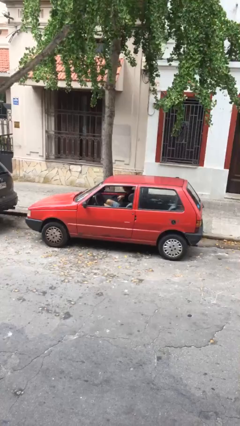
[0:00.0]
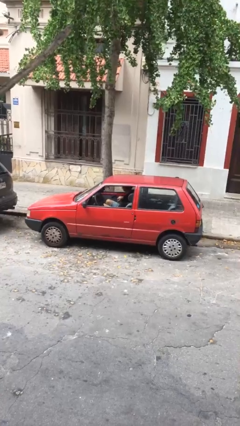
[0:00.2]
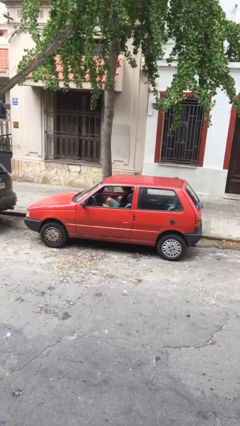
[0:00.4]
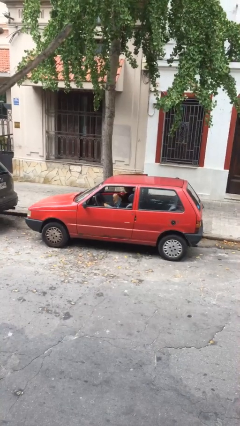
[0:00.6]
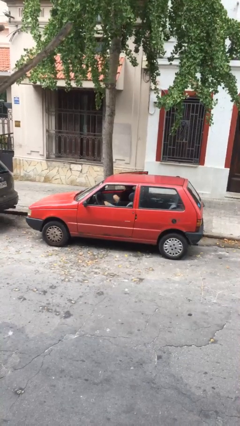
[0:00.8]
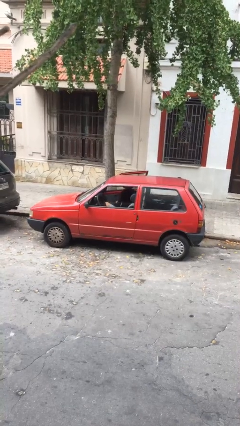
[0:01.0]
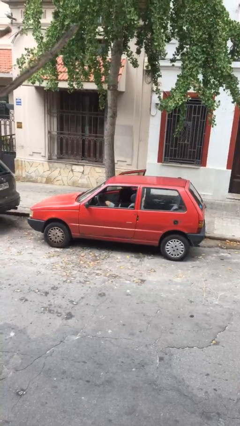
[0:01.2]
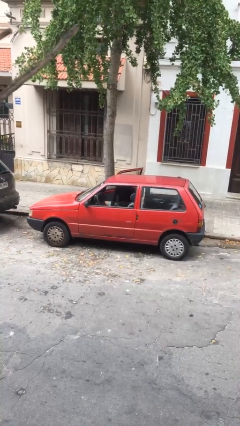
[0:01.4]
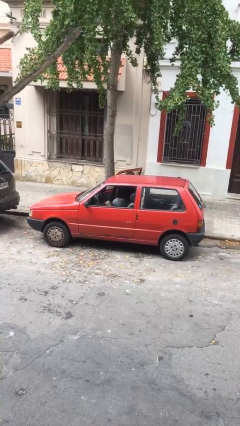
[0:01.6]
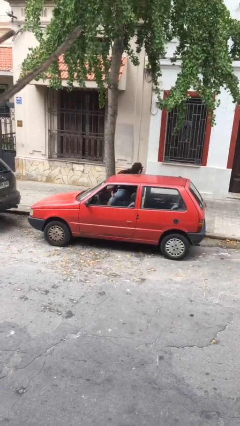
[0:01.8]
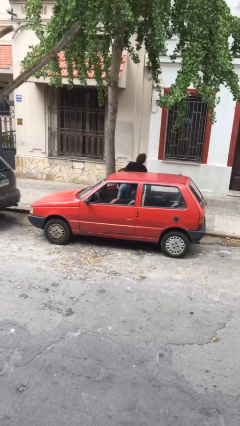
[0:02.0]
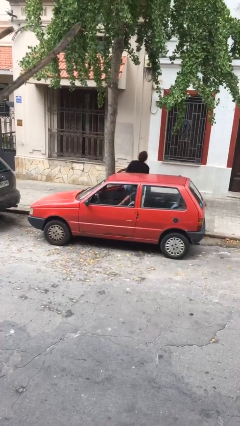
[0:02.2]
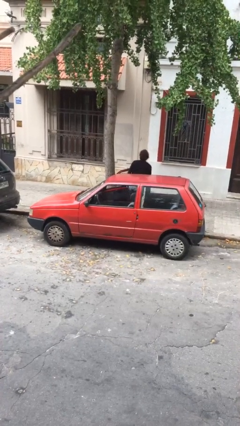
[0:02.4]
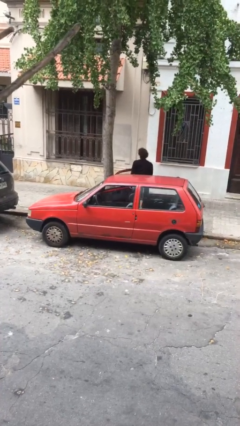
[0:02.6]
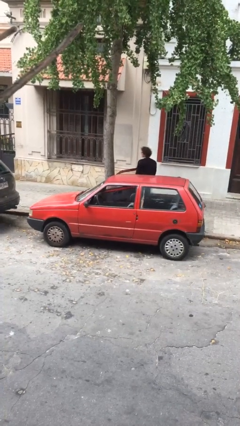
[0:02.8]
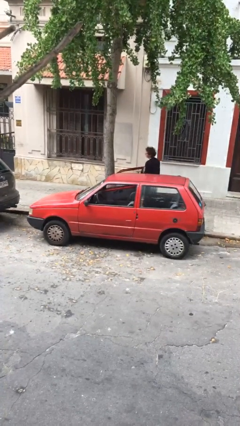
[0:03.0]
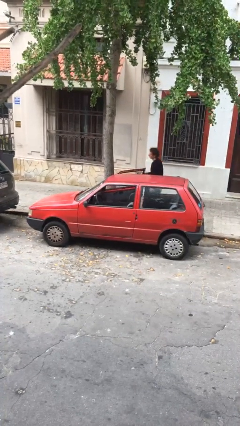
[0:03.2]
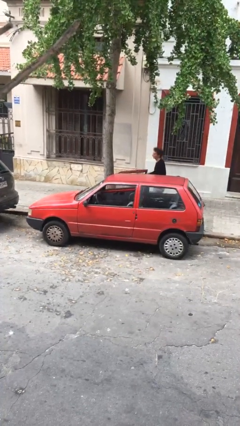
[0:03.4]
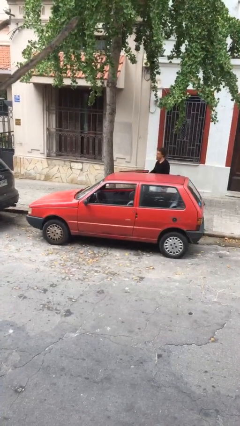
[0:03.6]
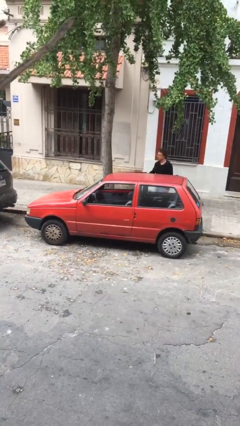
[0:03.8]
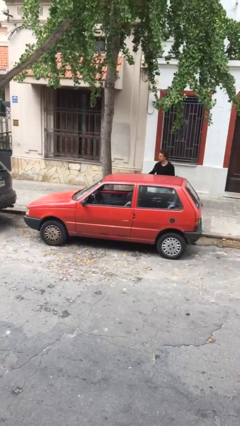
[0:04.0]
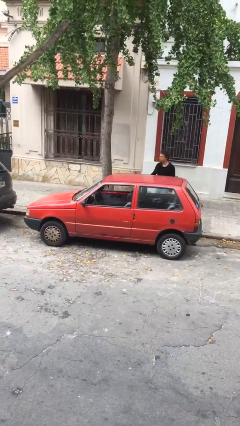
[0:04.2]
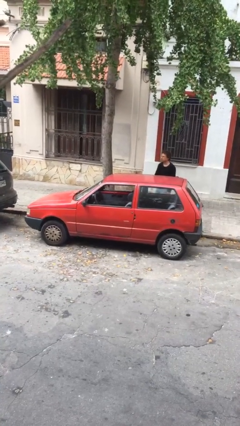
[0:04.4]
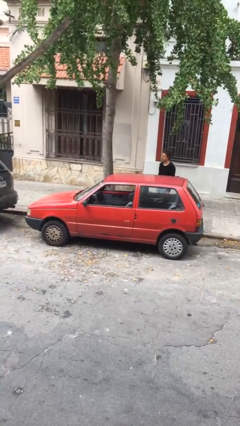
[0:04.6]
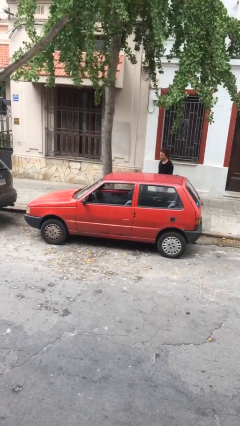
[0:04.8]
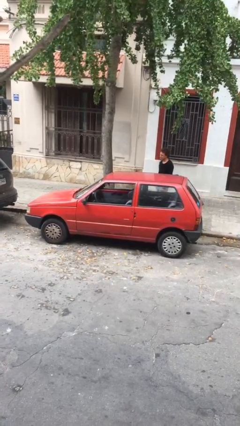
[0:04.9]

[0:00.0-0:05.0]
car drops off person

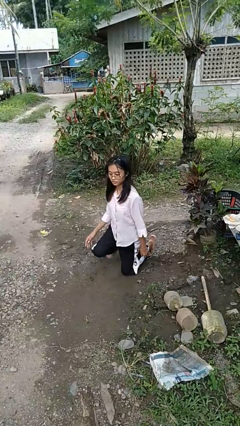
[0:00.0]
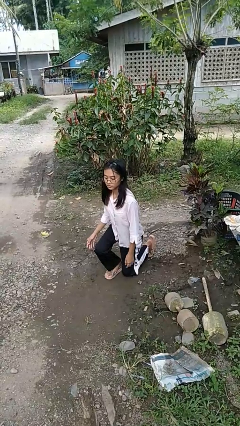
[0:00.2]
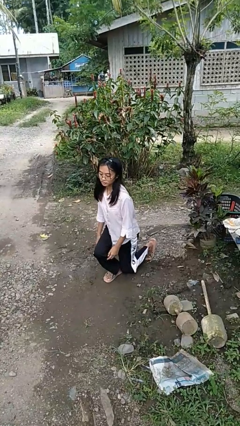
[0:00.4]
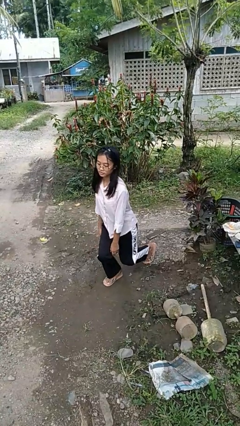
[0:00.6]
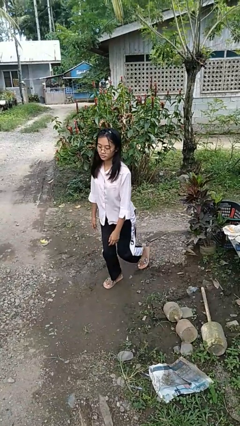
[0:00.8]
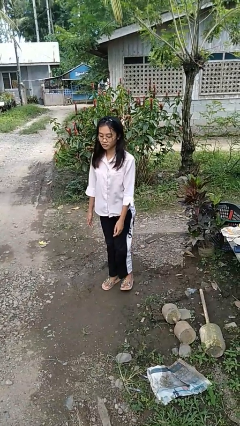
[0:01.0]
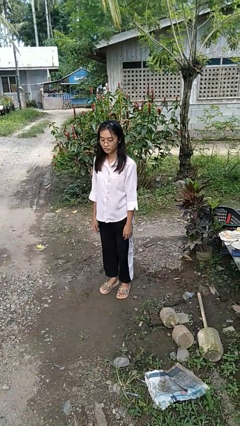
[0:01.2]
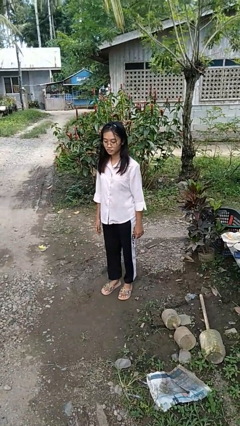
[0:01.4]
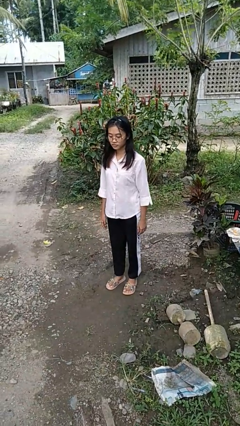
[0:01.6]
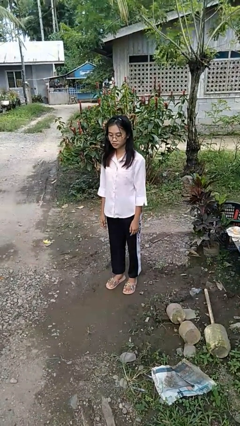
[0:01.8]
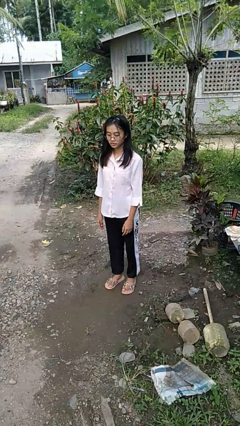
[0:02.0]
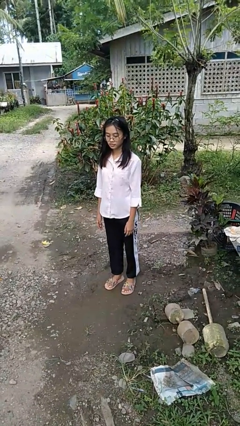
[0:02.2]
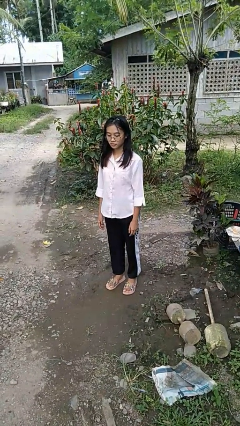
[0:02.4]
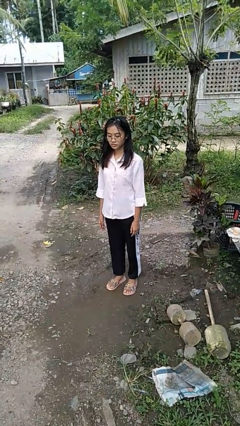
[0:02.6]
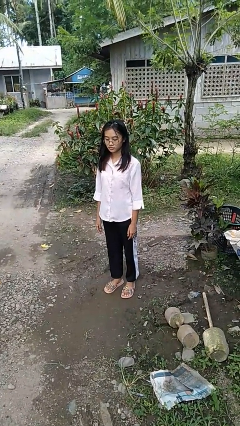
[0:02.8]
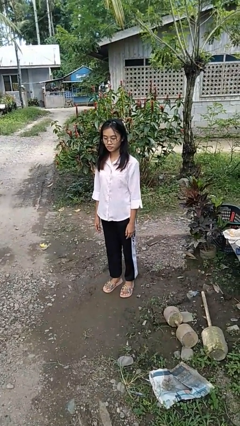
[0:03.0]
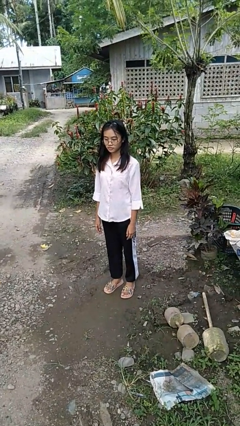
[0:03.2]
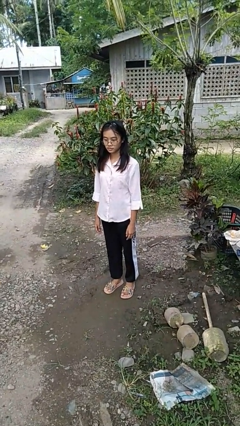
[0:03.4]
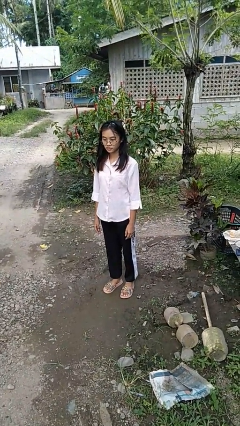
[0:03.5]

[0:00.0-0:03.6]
person stands up from floor

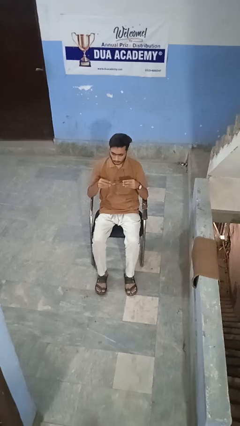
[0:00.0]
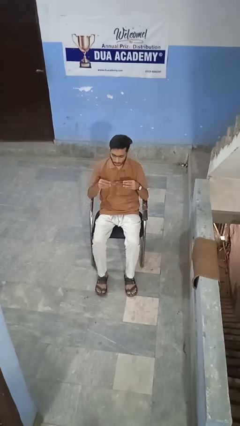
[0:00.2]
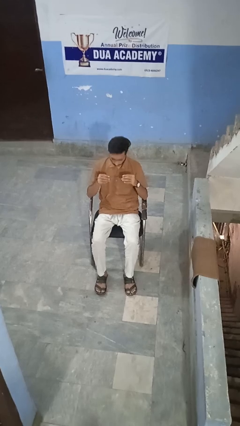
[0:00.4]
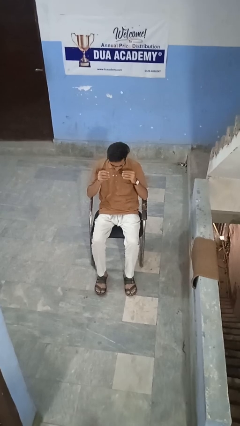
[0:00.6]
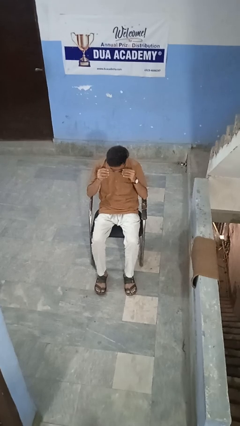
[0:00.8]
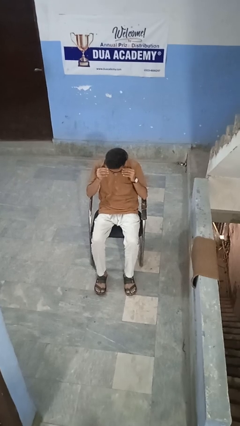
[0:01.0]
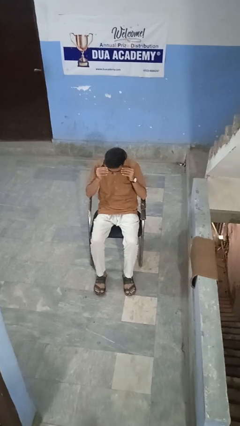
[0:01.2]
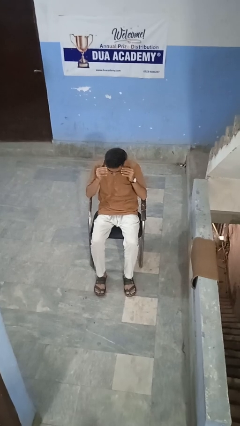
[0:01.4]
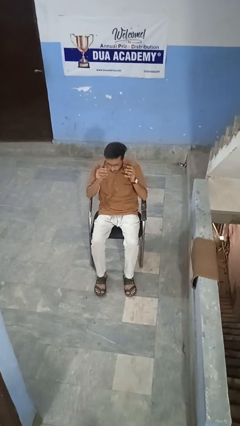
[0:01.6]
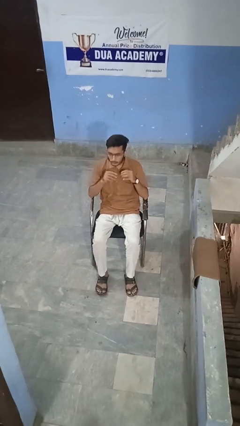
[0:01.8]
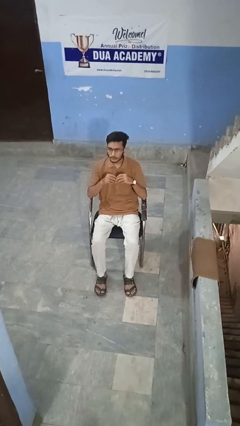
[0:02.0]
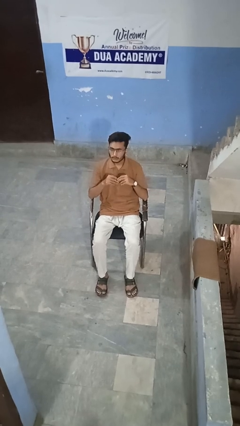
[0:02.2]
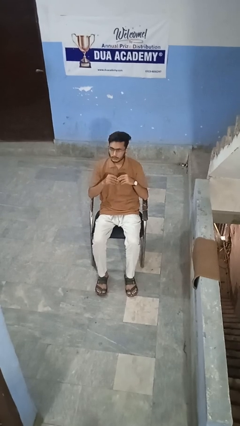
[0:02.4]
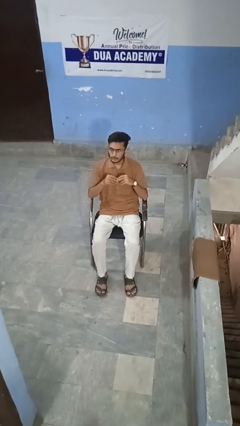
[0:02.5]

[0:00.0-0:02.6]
person puts on glasses

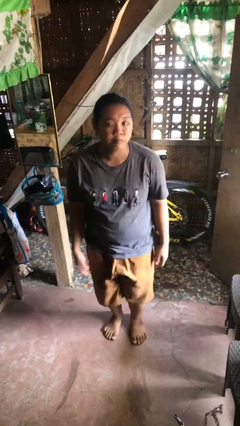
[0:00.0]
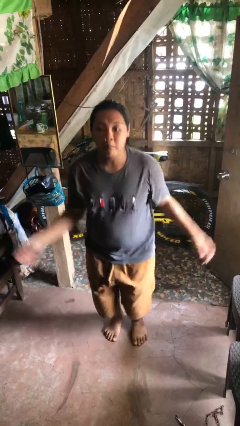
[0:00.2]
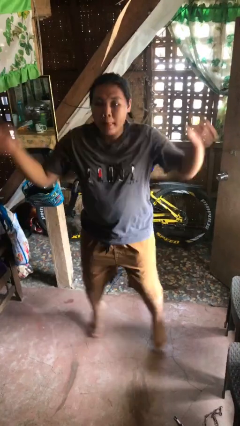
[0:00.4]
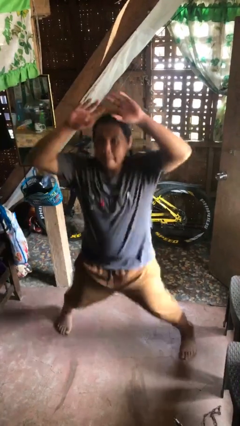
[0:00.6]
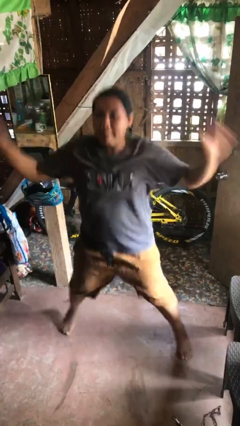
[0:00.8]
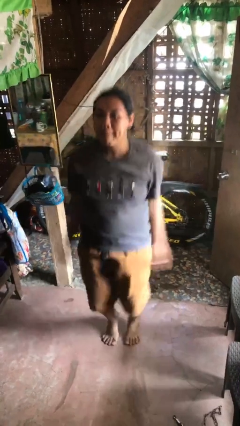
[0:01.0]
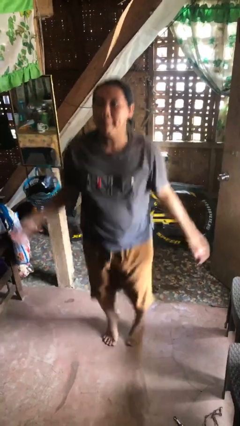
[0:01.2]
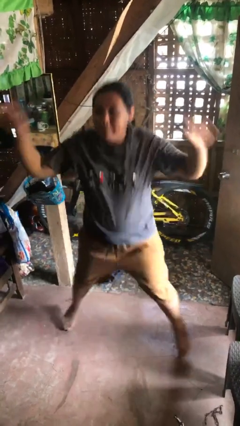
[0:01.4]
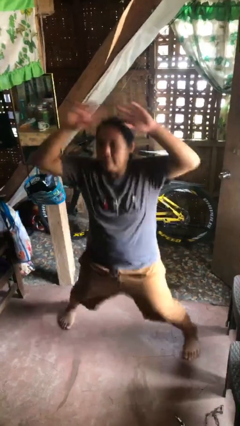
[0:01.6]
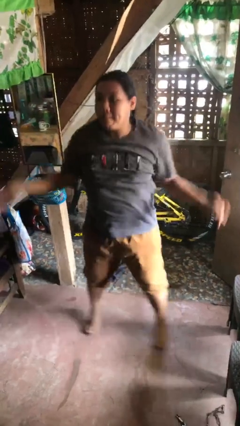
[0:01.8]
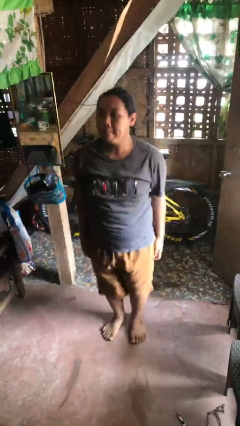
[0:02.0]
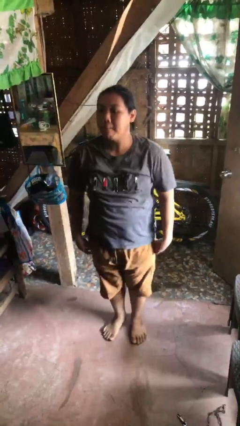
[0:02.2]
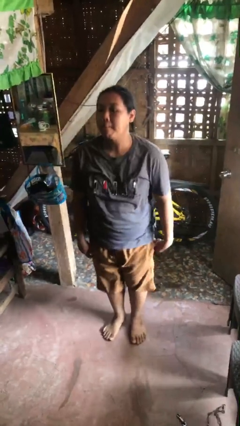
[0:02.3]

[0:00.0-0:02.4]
person exercises with jumping jacks

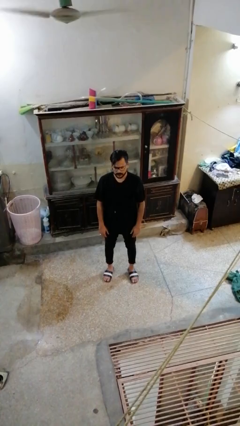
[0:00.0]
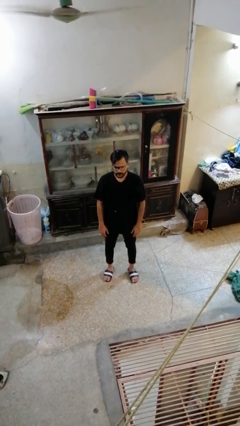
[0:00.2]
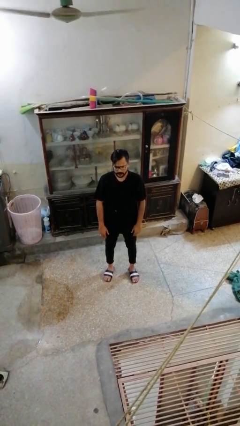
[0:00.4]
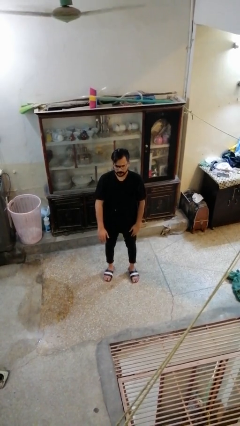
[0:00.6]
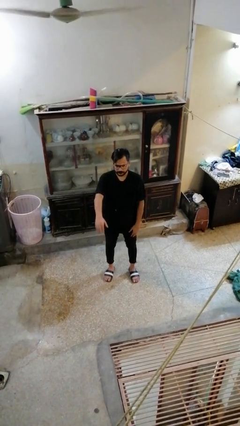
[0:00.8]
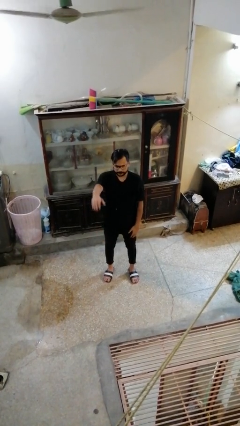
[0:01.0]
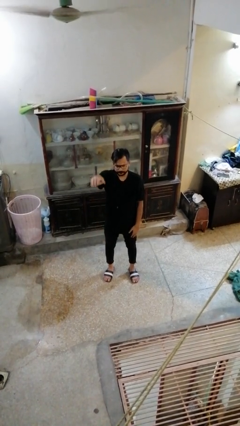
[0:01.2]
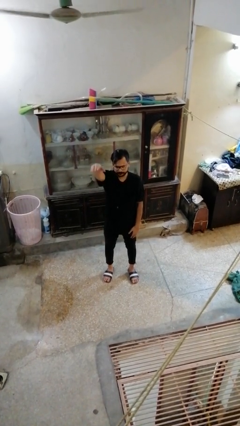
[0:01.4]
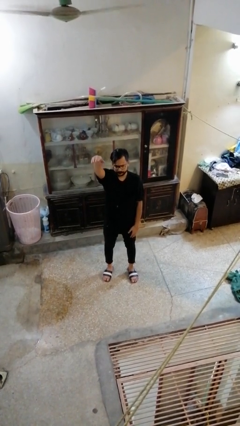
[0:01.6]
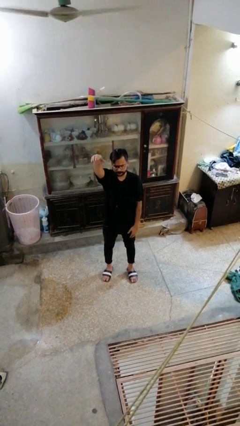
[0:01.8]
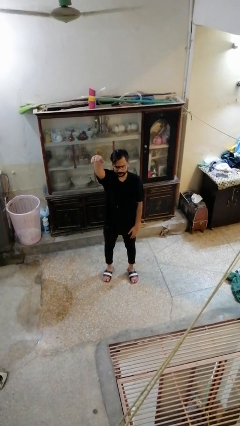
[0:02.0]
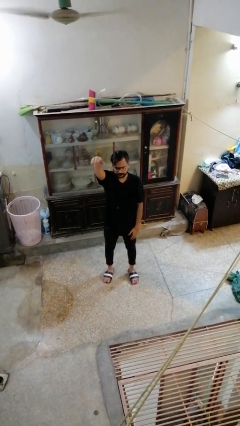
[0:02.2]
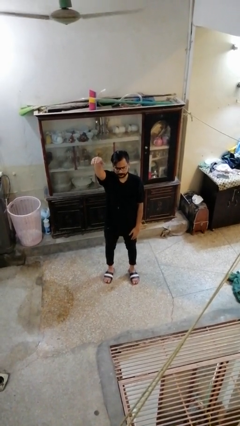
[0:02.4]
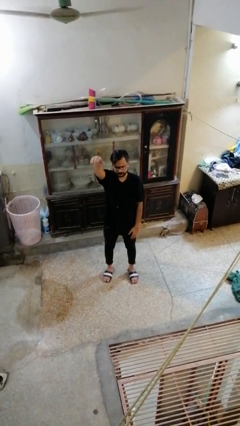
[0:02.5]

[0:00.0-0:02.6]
person gestures swipe up

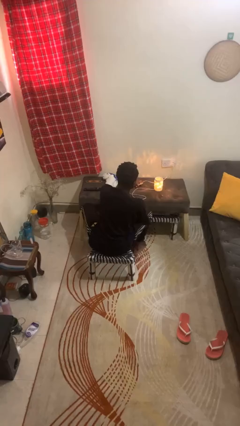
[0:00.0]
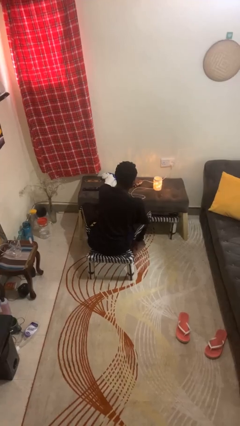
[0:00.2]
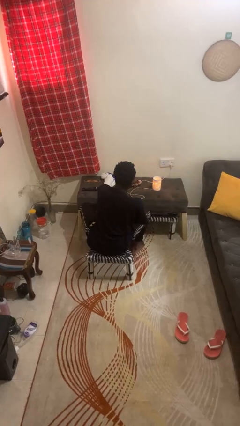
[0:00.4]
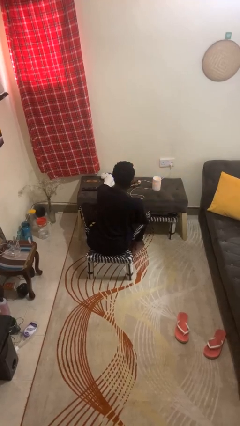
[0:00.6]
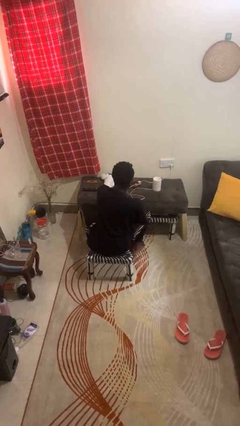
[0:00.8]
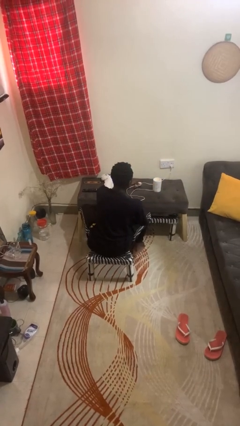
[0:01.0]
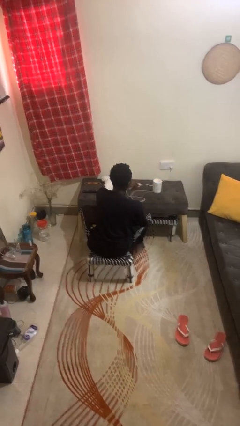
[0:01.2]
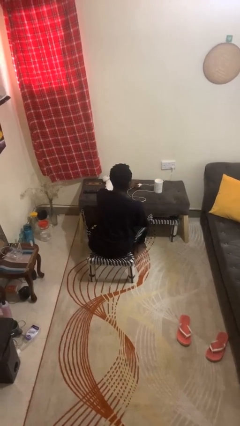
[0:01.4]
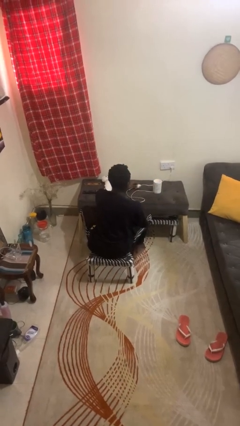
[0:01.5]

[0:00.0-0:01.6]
person turns off lamp
